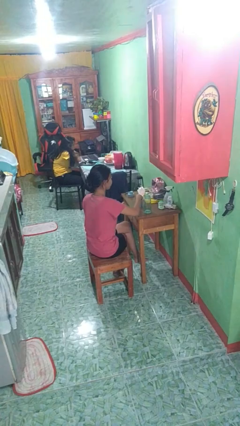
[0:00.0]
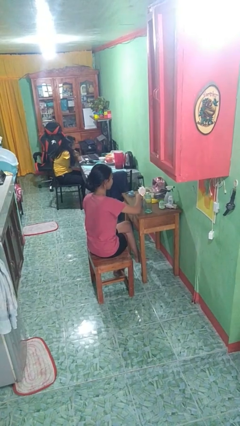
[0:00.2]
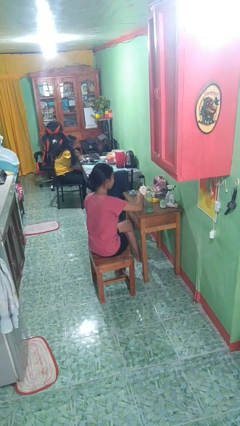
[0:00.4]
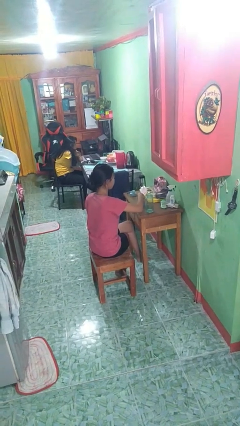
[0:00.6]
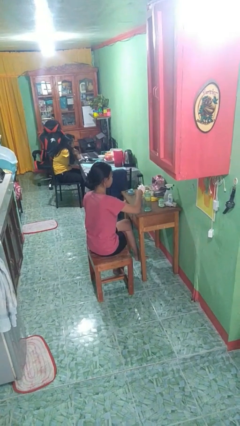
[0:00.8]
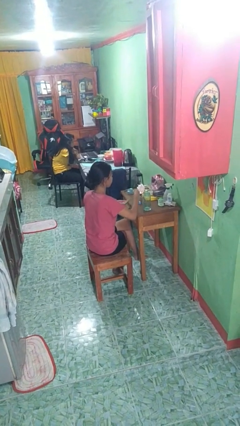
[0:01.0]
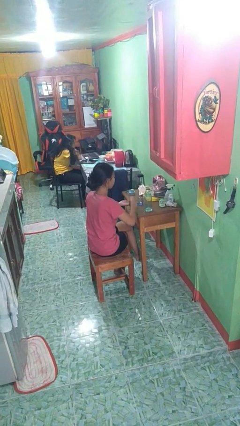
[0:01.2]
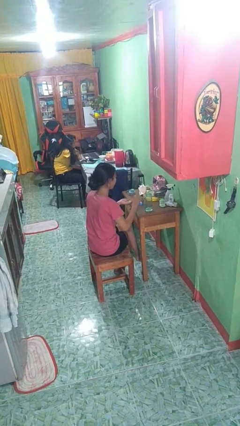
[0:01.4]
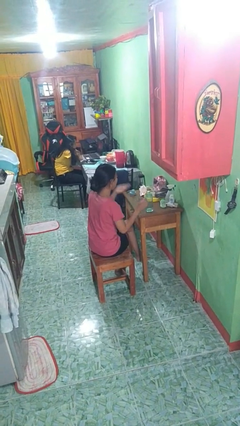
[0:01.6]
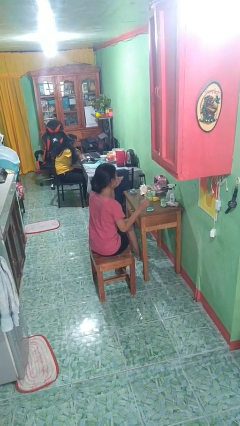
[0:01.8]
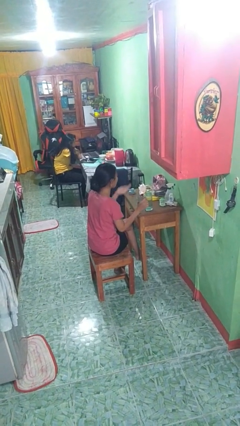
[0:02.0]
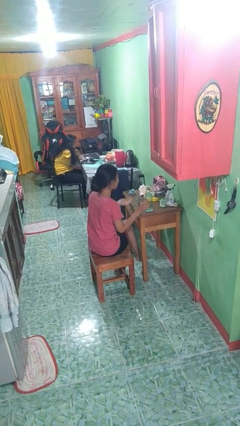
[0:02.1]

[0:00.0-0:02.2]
person takes medicine pills

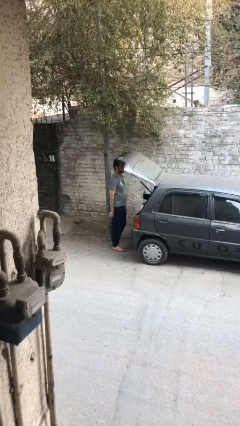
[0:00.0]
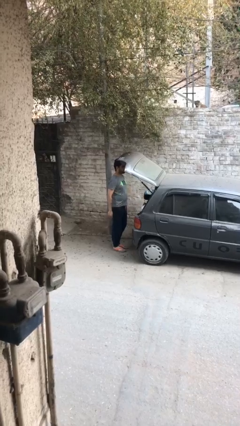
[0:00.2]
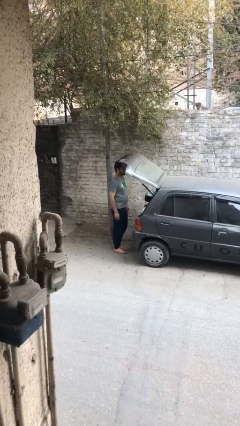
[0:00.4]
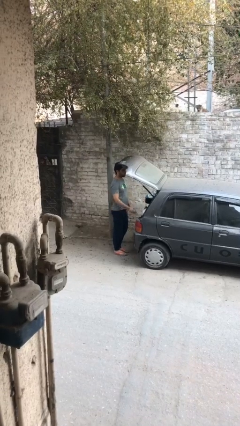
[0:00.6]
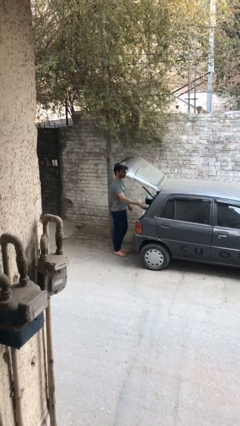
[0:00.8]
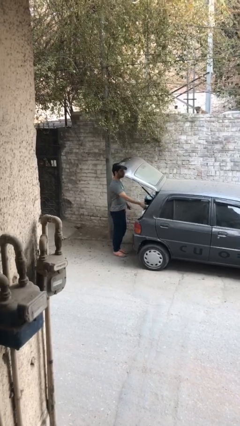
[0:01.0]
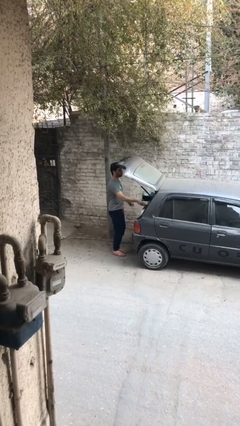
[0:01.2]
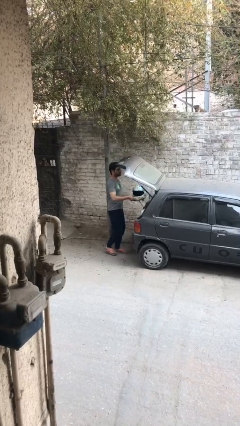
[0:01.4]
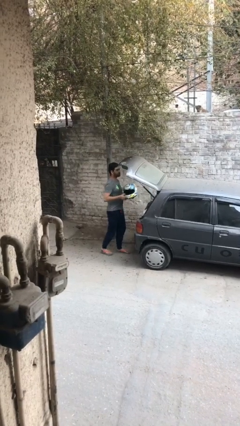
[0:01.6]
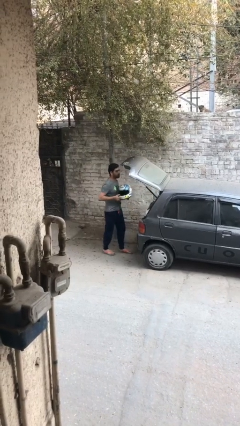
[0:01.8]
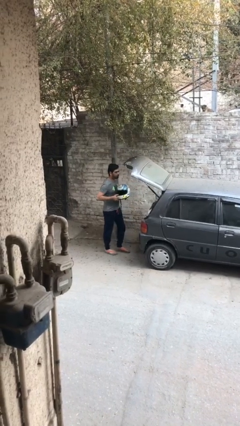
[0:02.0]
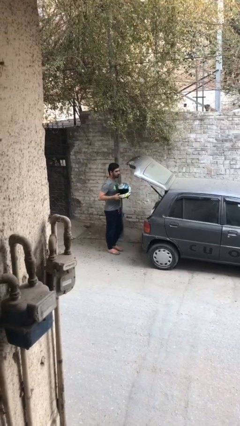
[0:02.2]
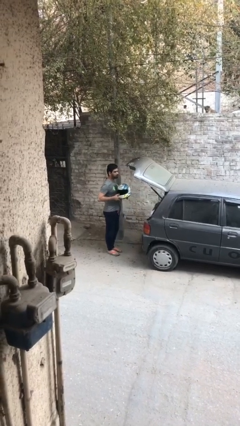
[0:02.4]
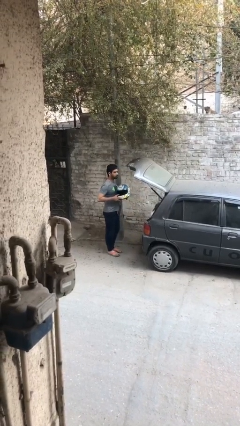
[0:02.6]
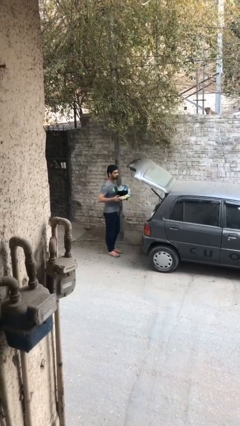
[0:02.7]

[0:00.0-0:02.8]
person unloads car

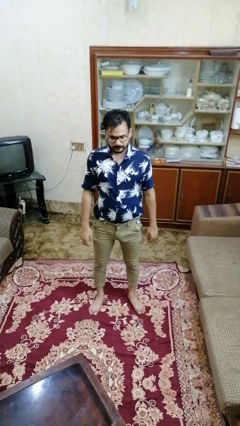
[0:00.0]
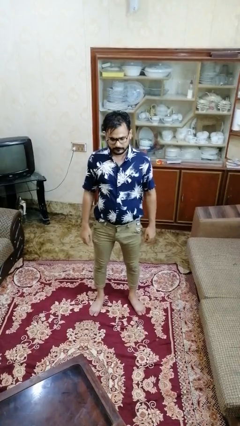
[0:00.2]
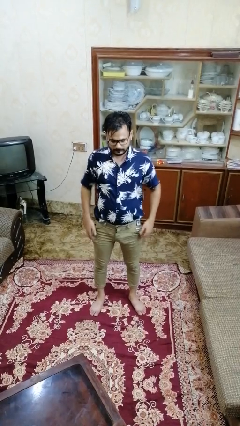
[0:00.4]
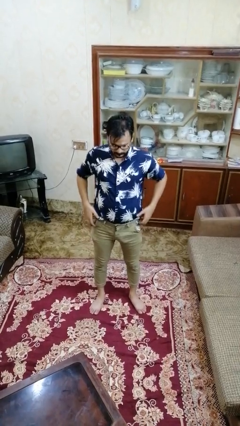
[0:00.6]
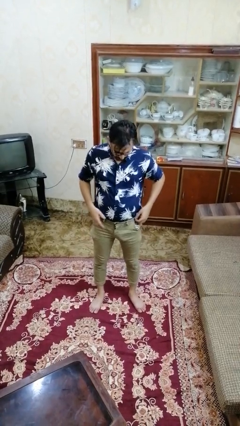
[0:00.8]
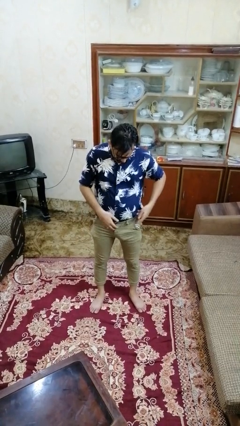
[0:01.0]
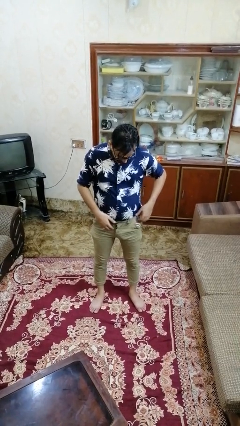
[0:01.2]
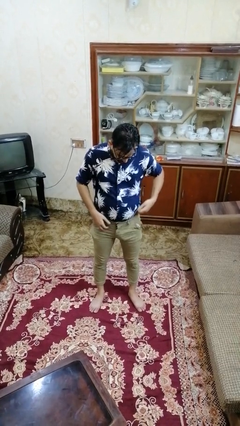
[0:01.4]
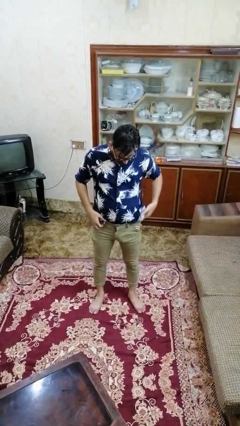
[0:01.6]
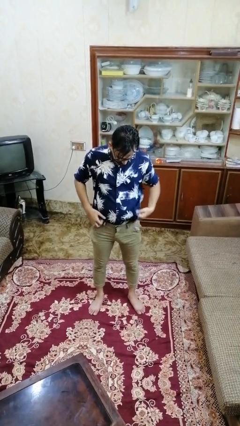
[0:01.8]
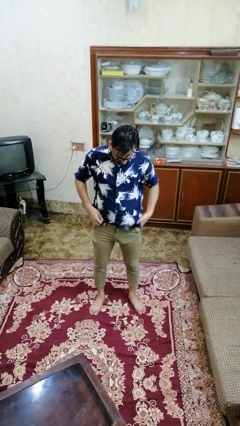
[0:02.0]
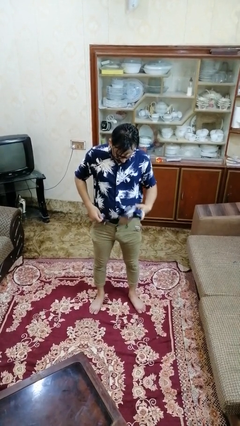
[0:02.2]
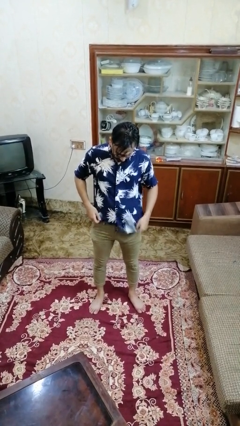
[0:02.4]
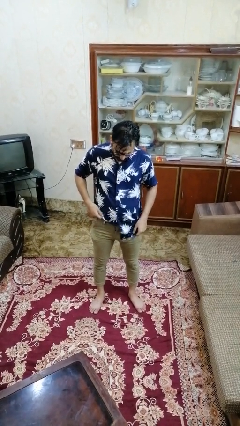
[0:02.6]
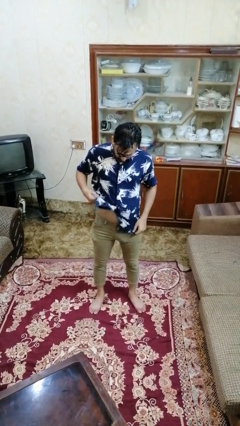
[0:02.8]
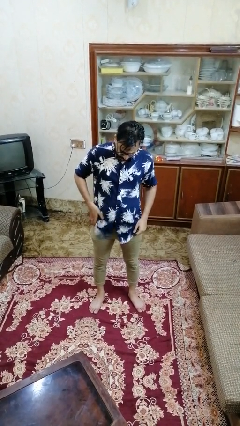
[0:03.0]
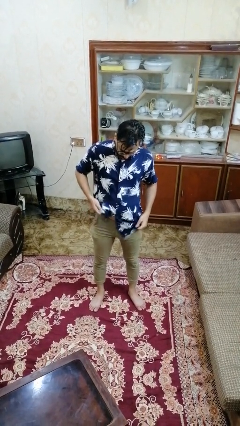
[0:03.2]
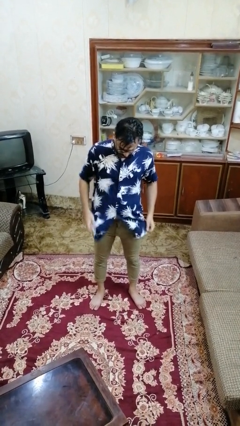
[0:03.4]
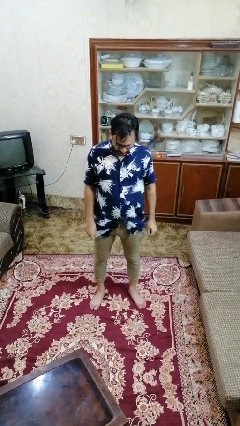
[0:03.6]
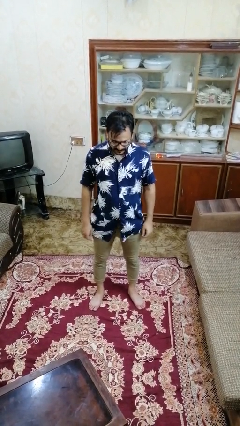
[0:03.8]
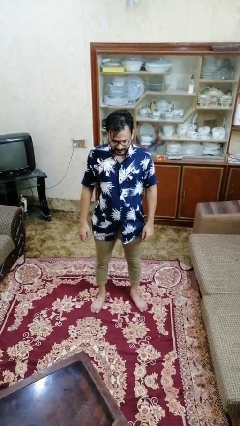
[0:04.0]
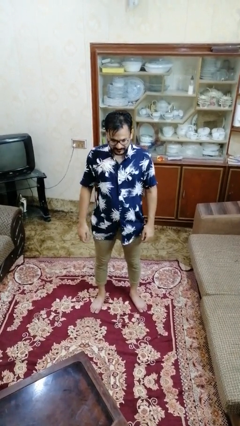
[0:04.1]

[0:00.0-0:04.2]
person untucks shirt

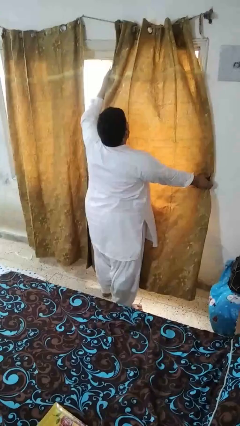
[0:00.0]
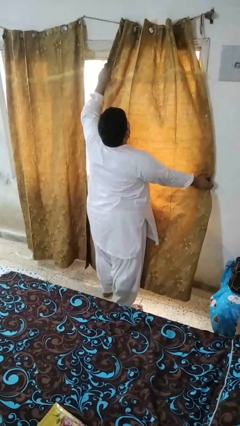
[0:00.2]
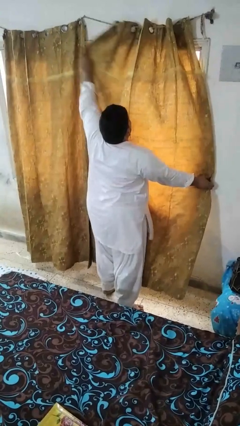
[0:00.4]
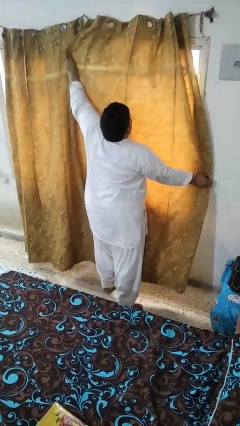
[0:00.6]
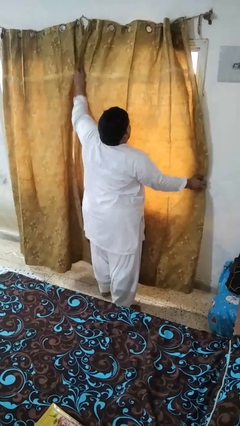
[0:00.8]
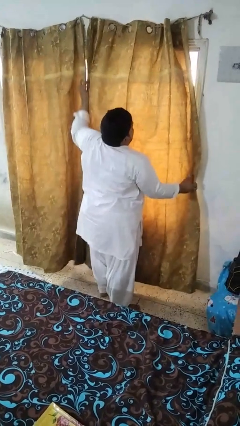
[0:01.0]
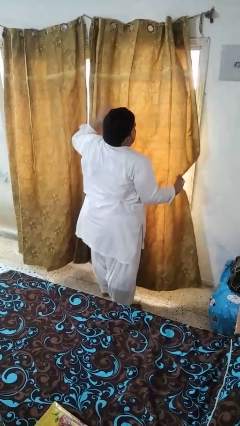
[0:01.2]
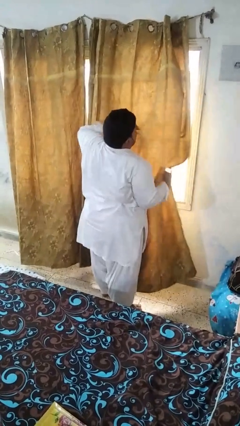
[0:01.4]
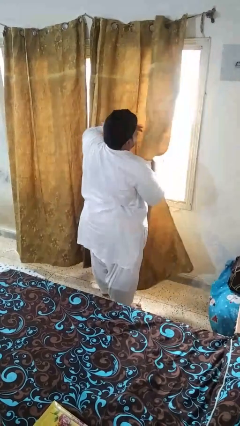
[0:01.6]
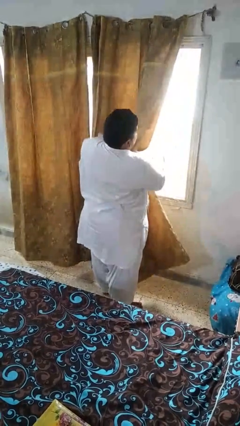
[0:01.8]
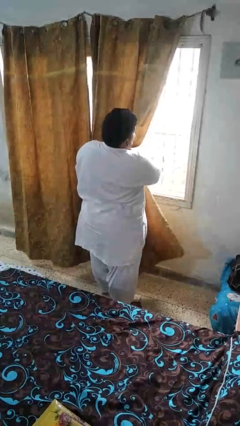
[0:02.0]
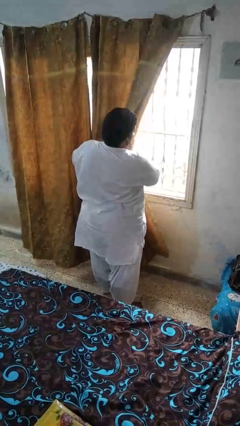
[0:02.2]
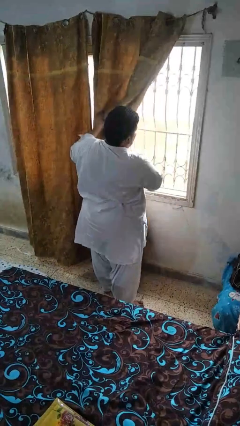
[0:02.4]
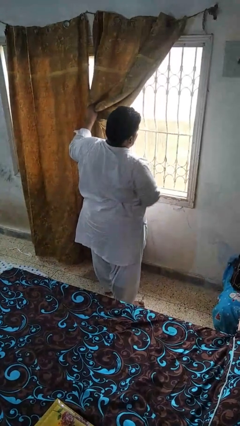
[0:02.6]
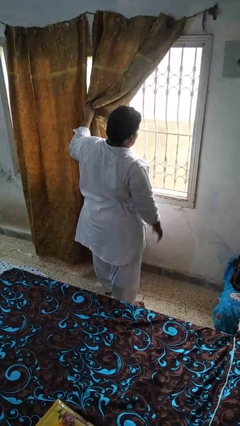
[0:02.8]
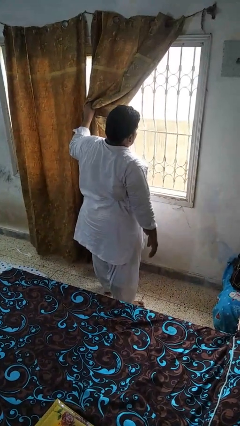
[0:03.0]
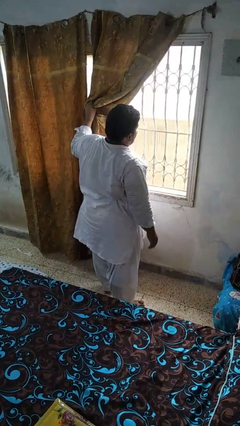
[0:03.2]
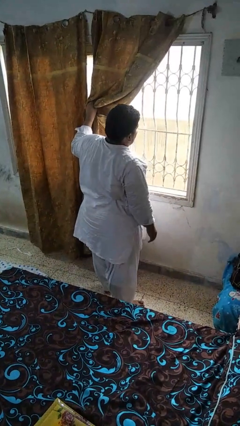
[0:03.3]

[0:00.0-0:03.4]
person opens curtains

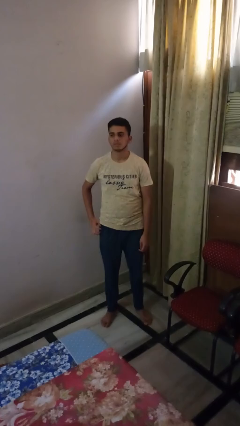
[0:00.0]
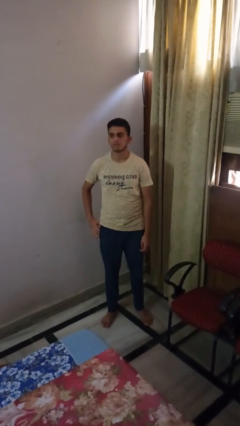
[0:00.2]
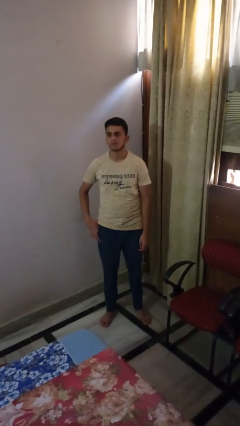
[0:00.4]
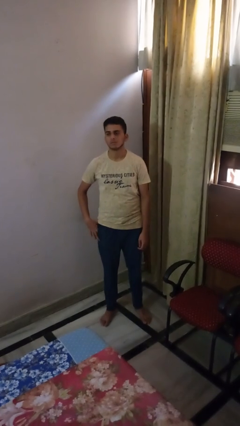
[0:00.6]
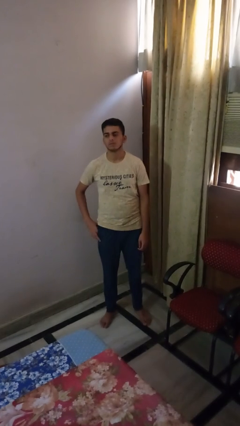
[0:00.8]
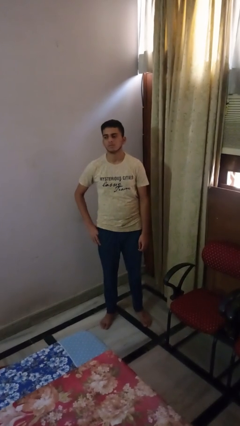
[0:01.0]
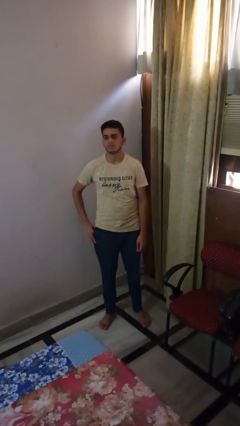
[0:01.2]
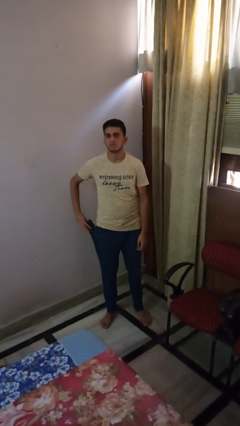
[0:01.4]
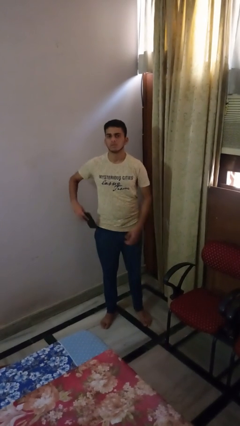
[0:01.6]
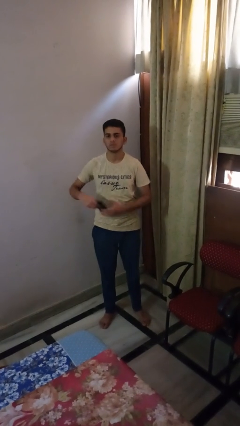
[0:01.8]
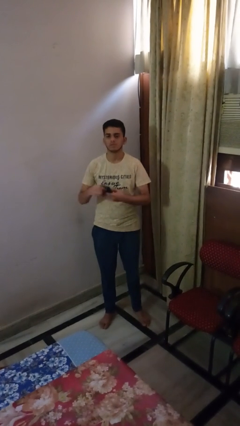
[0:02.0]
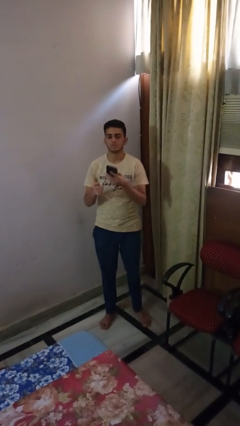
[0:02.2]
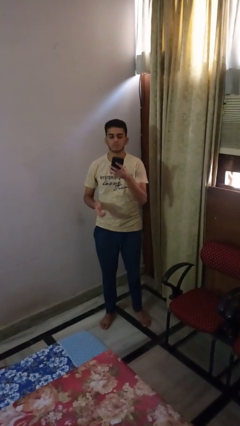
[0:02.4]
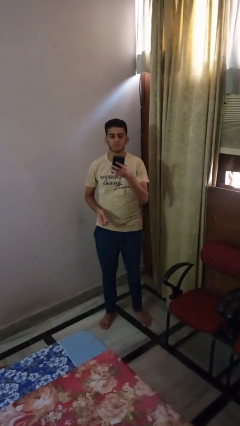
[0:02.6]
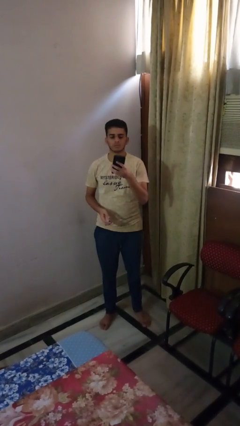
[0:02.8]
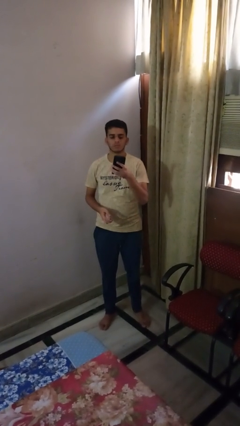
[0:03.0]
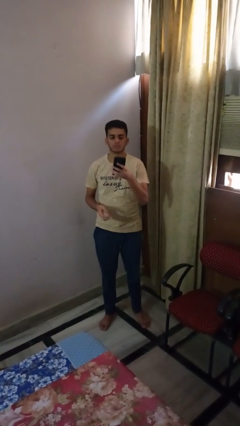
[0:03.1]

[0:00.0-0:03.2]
person takes phone from pocket

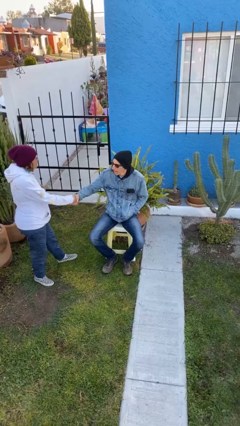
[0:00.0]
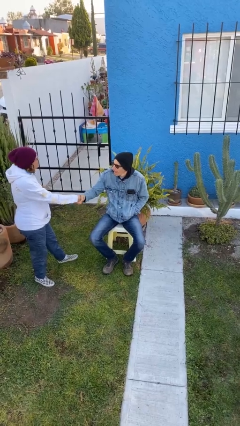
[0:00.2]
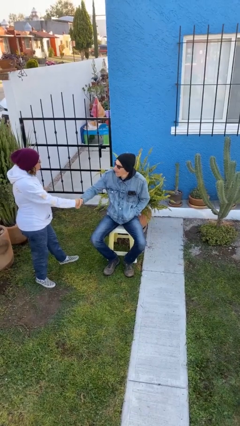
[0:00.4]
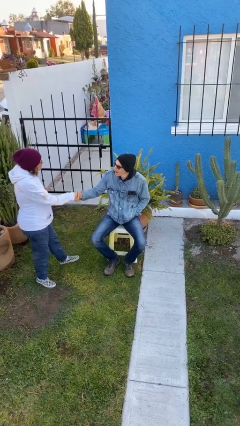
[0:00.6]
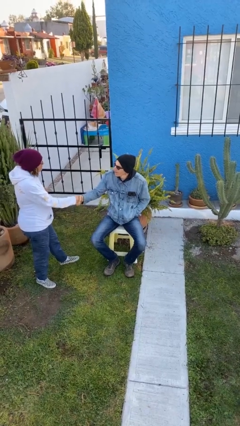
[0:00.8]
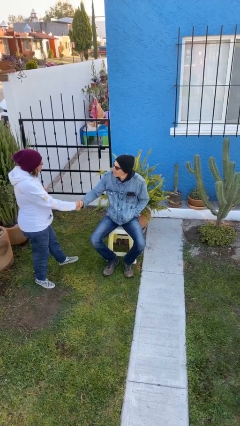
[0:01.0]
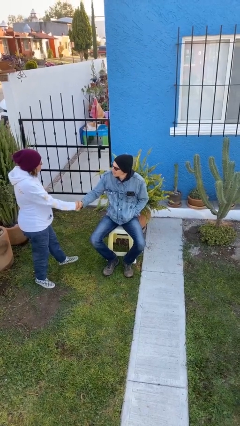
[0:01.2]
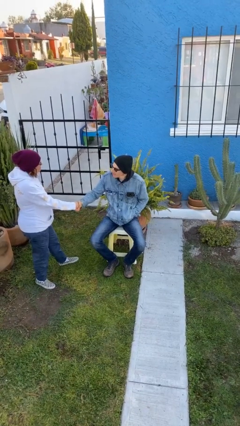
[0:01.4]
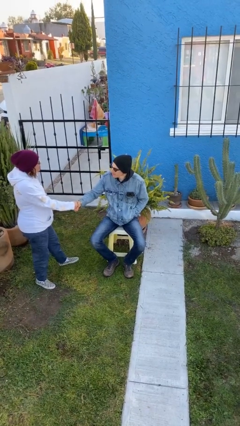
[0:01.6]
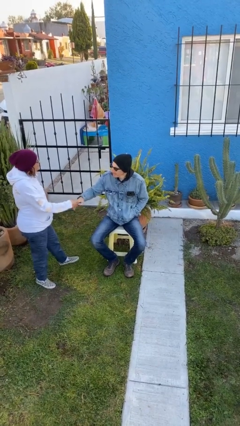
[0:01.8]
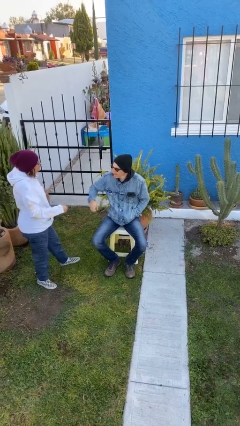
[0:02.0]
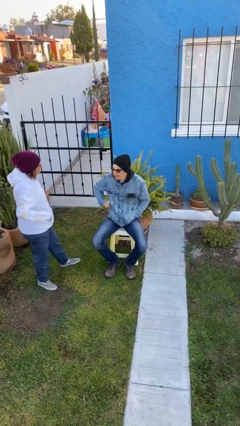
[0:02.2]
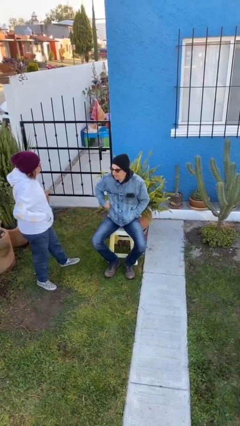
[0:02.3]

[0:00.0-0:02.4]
person shakes hand
